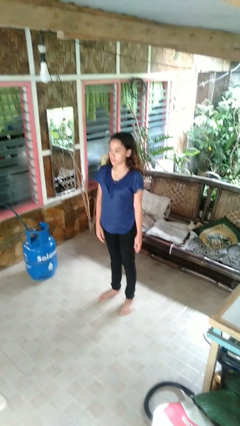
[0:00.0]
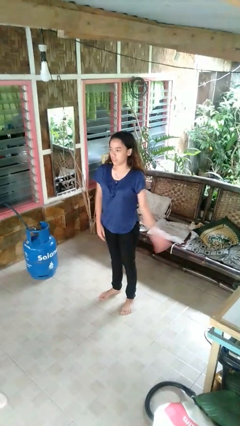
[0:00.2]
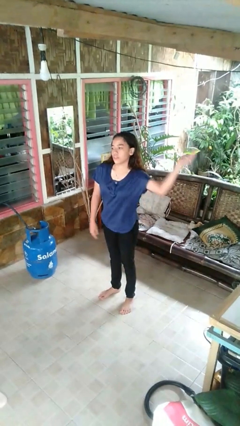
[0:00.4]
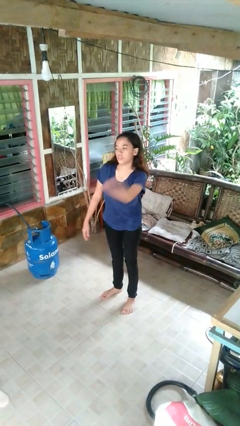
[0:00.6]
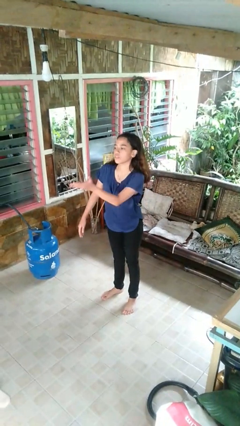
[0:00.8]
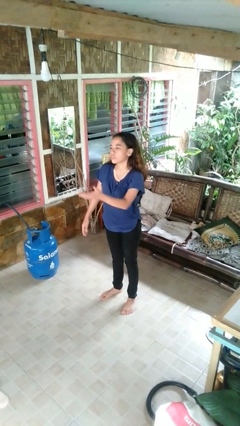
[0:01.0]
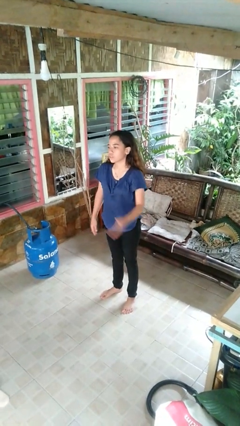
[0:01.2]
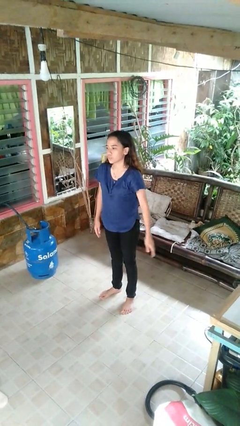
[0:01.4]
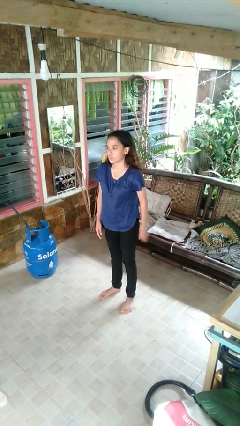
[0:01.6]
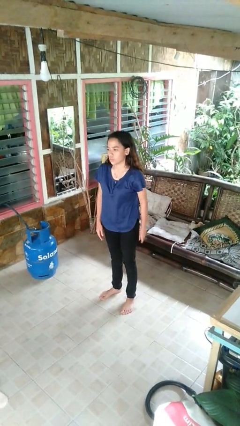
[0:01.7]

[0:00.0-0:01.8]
person karate chop

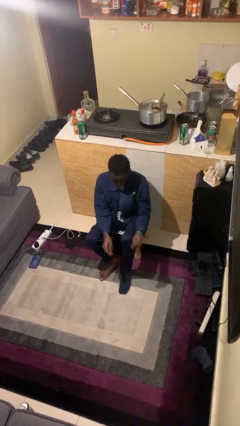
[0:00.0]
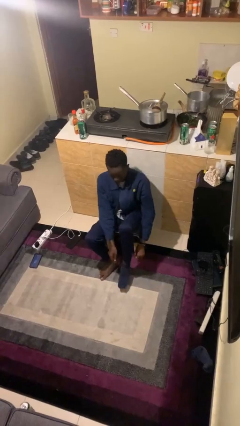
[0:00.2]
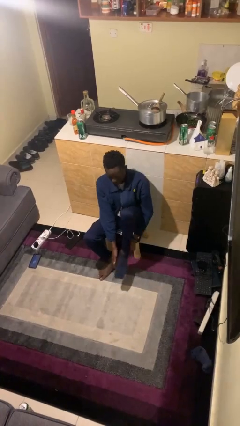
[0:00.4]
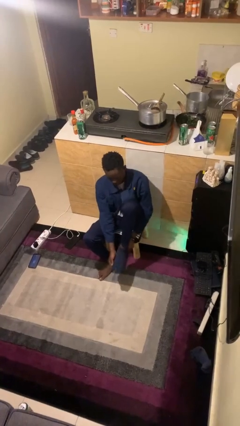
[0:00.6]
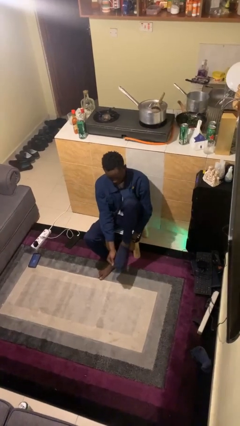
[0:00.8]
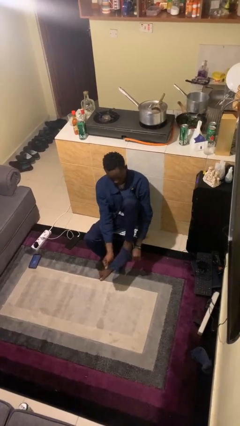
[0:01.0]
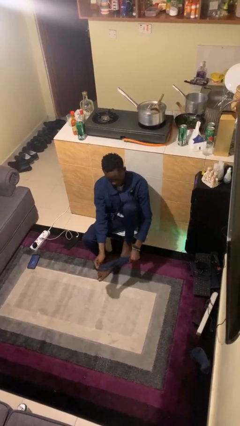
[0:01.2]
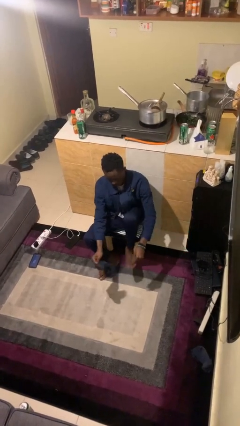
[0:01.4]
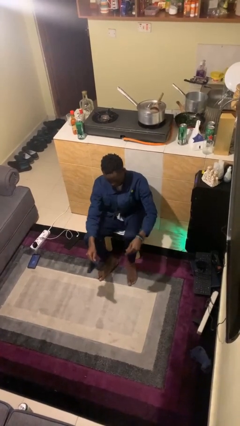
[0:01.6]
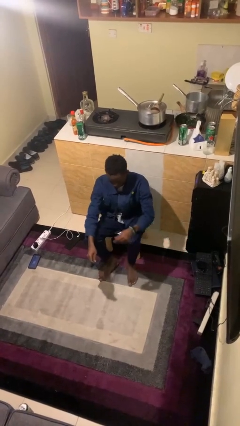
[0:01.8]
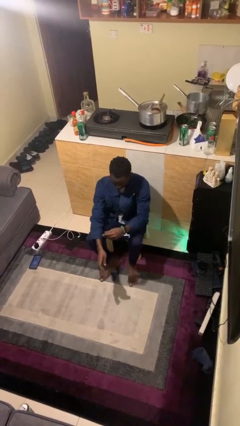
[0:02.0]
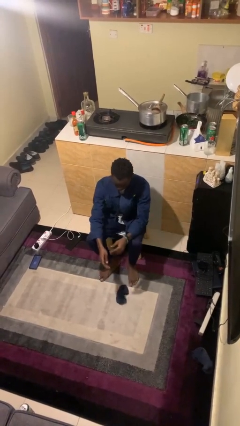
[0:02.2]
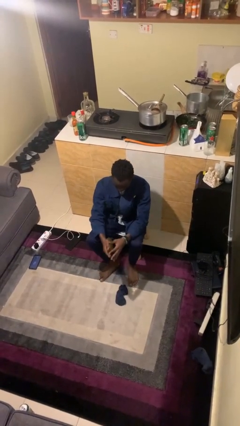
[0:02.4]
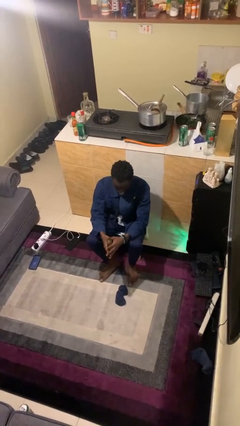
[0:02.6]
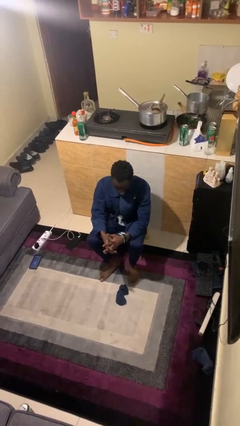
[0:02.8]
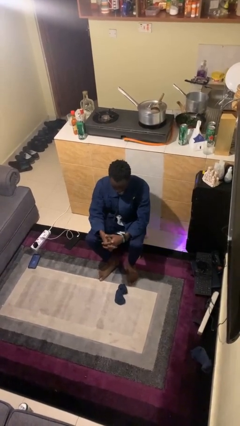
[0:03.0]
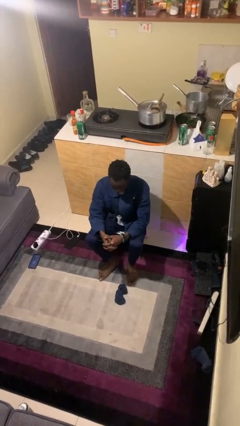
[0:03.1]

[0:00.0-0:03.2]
person takes off socks

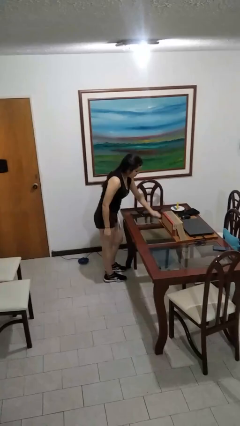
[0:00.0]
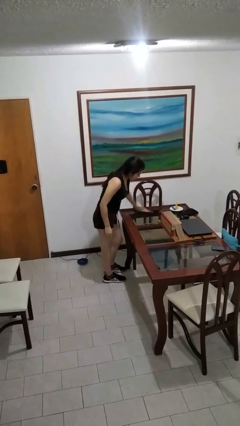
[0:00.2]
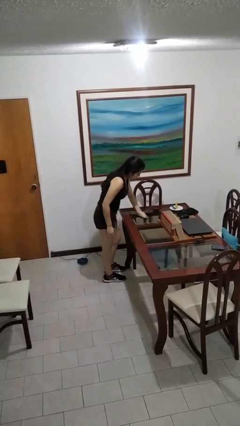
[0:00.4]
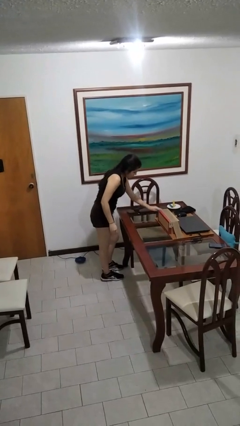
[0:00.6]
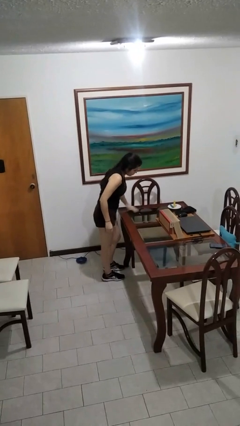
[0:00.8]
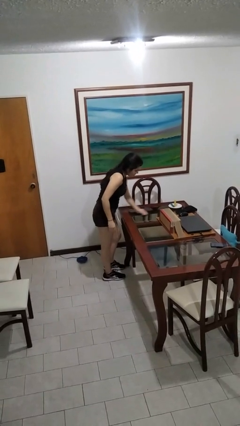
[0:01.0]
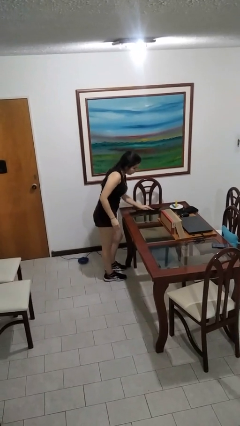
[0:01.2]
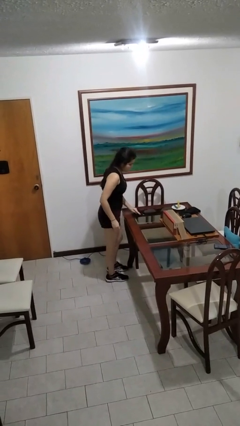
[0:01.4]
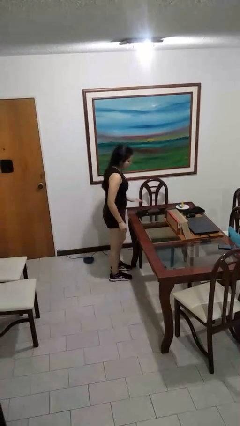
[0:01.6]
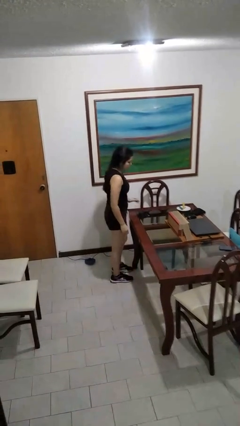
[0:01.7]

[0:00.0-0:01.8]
person cleans table with rag

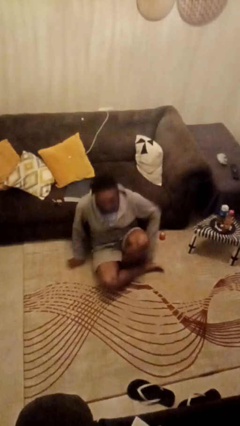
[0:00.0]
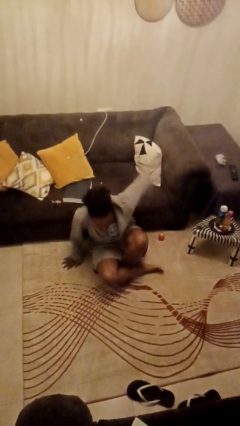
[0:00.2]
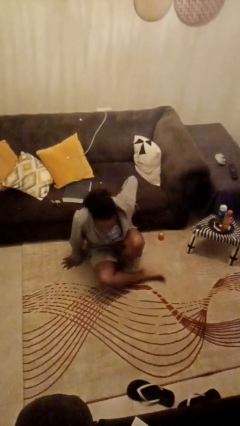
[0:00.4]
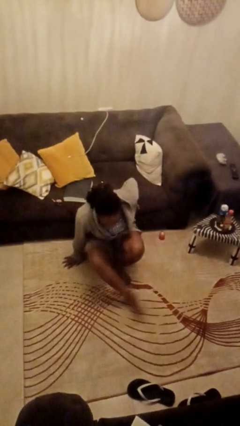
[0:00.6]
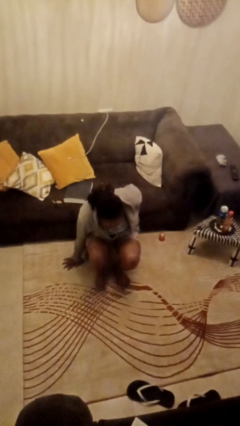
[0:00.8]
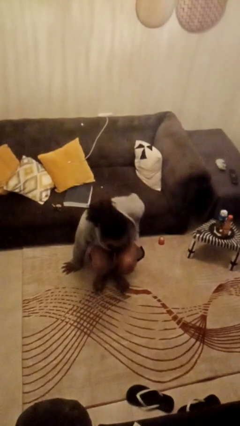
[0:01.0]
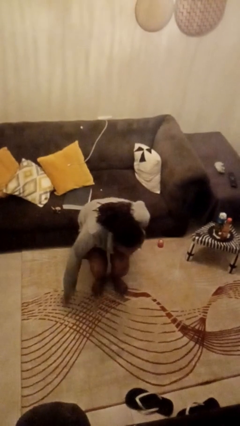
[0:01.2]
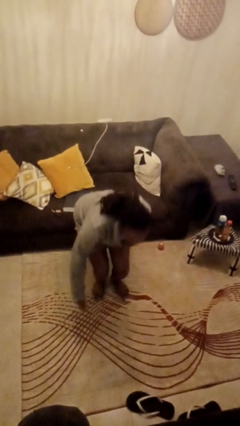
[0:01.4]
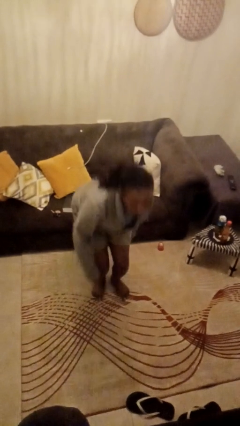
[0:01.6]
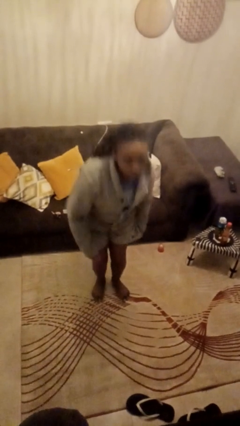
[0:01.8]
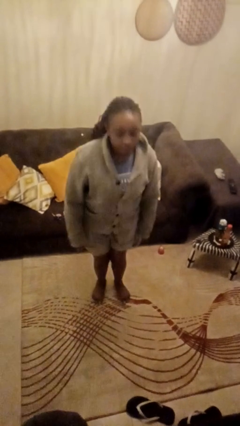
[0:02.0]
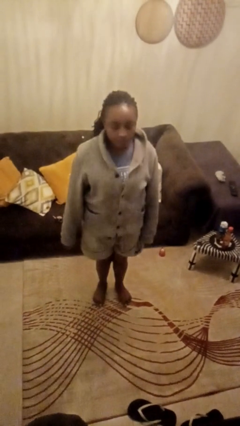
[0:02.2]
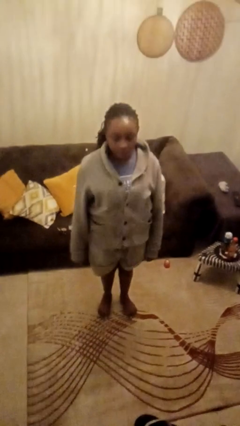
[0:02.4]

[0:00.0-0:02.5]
person stands up from floor

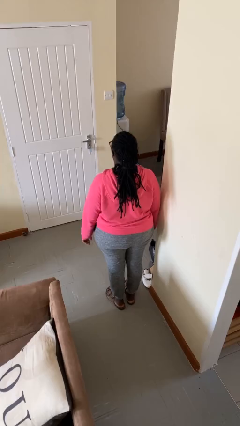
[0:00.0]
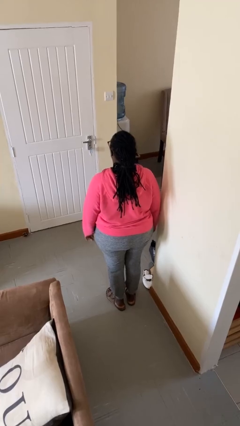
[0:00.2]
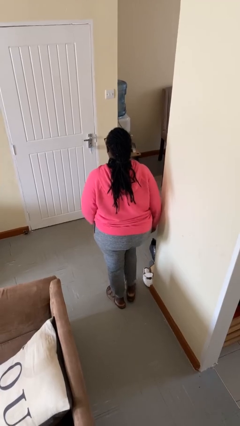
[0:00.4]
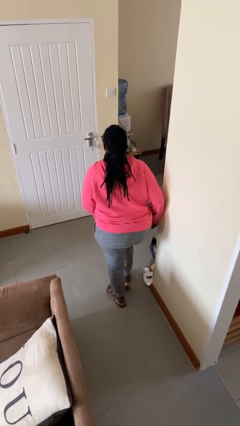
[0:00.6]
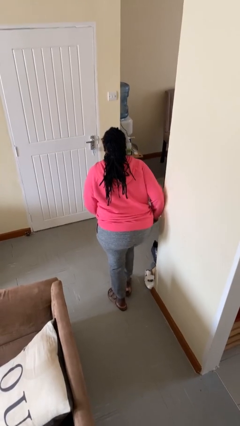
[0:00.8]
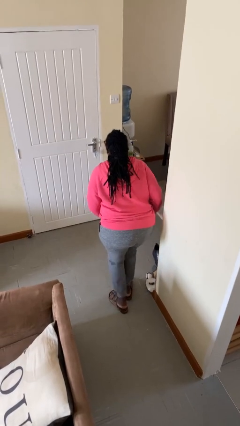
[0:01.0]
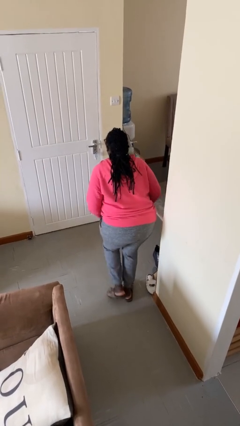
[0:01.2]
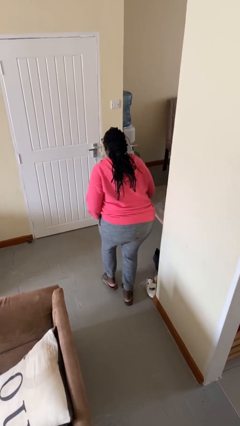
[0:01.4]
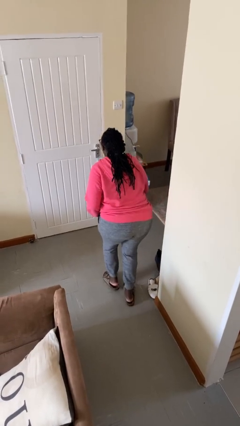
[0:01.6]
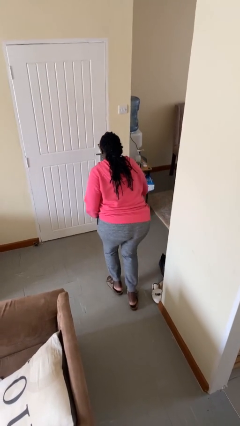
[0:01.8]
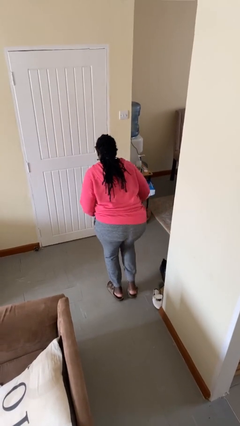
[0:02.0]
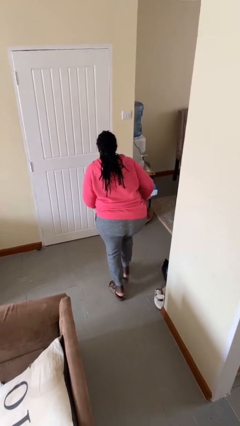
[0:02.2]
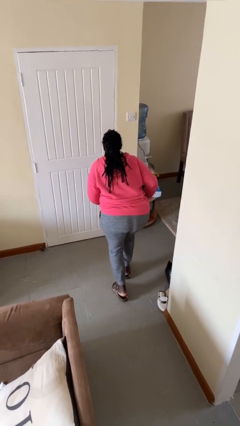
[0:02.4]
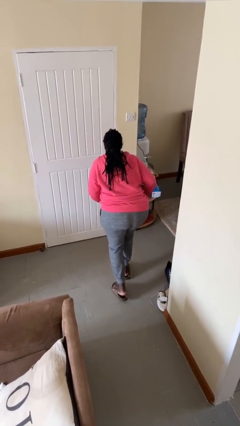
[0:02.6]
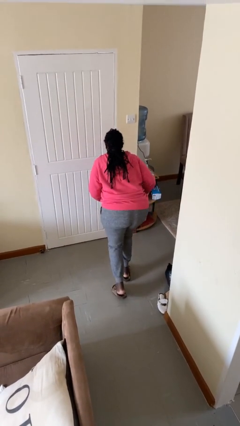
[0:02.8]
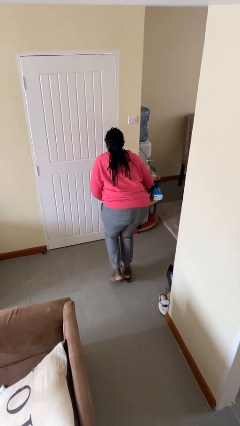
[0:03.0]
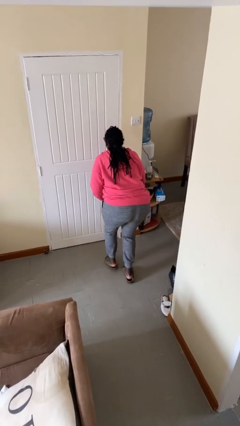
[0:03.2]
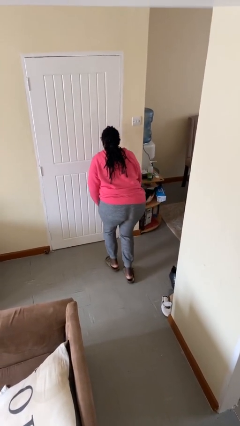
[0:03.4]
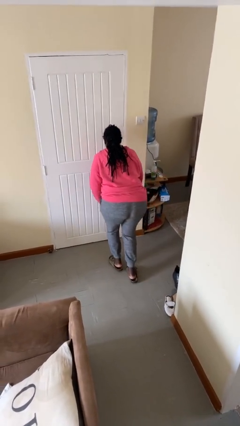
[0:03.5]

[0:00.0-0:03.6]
person walks tiptoe

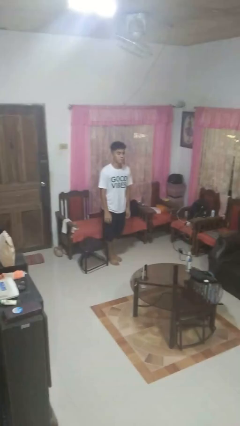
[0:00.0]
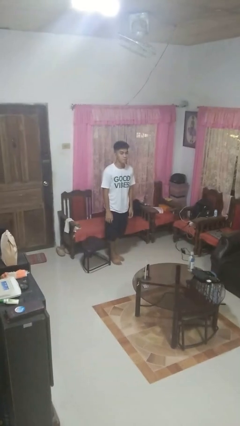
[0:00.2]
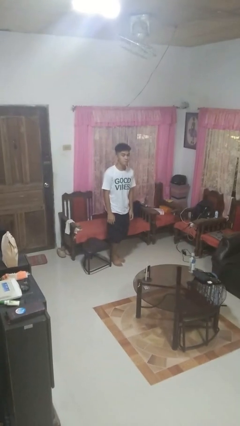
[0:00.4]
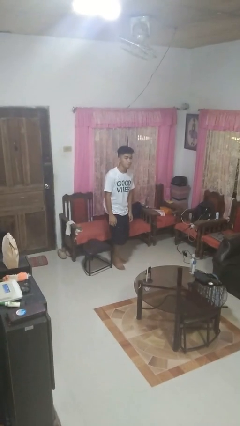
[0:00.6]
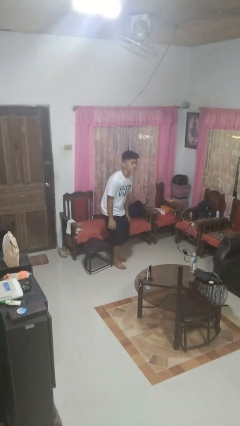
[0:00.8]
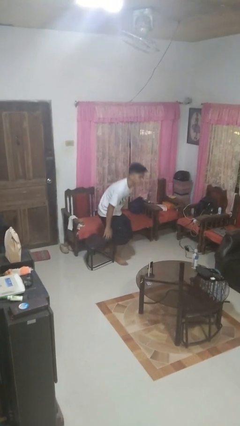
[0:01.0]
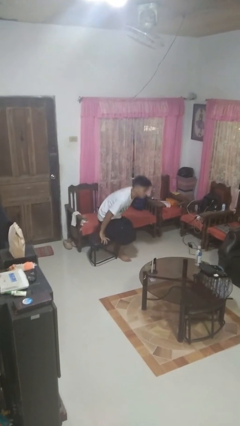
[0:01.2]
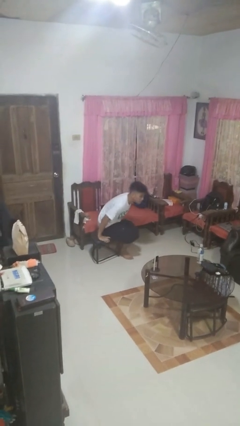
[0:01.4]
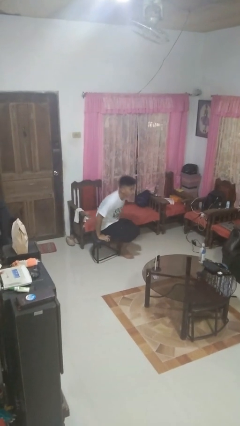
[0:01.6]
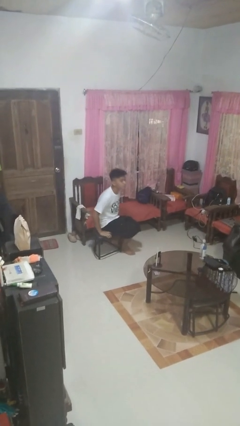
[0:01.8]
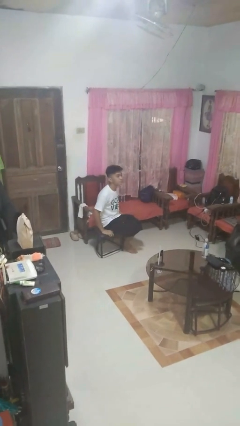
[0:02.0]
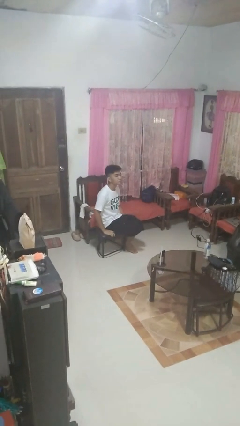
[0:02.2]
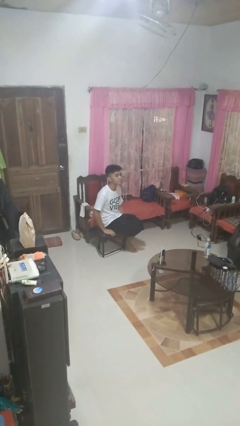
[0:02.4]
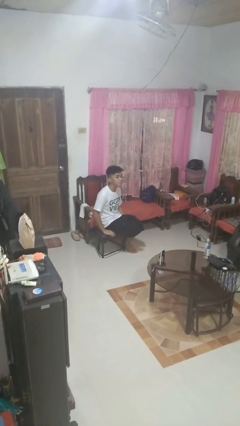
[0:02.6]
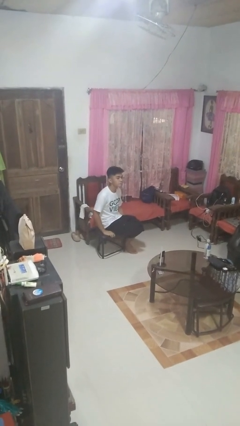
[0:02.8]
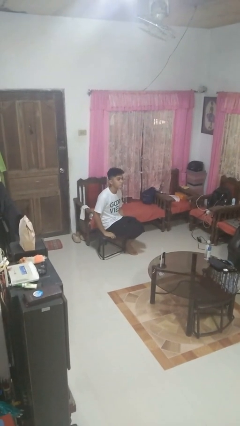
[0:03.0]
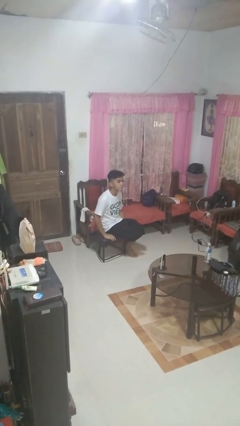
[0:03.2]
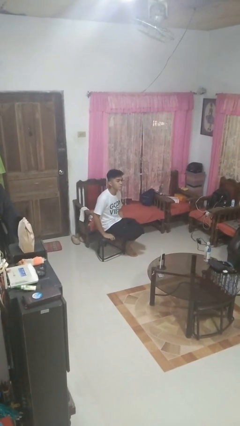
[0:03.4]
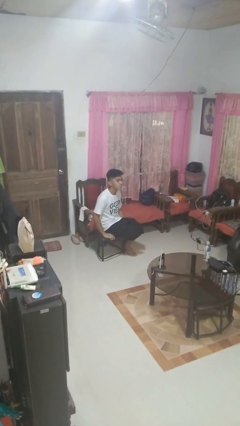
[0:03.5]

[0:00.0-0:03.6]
person sits down

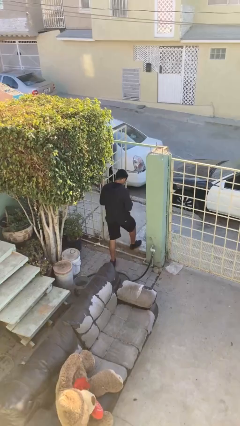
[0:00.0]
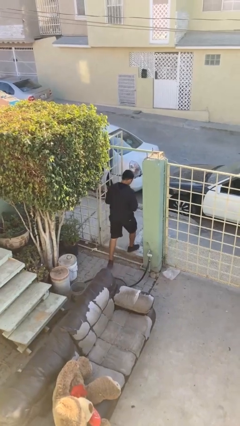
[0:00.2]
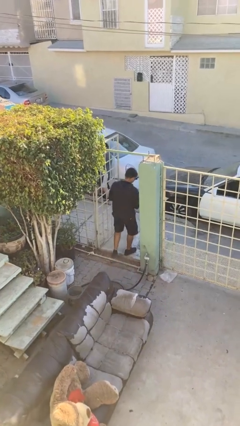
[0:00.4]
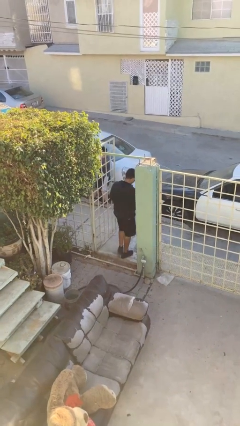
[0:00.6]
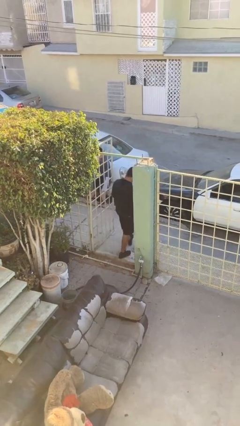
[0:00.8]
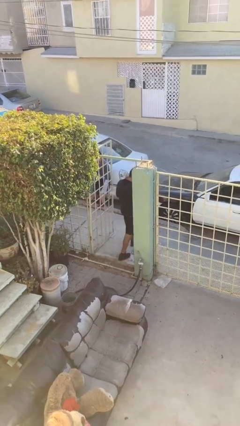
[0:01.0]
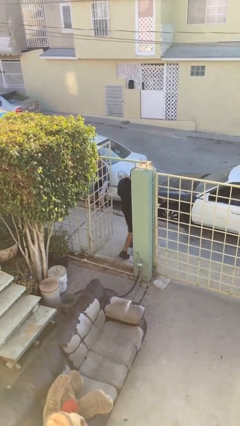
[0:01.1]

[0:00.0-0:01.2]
person exits scene through structure
